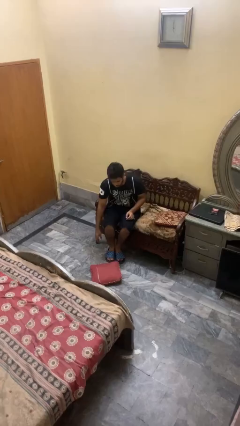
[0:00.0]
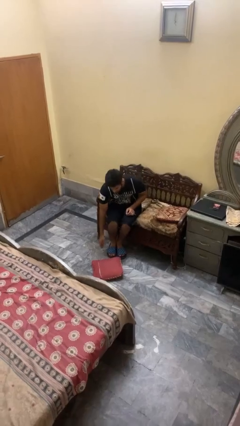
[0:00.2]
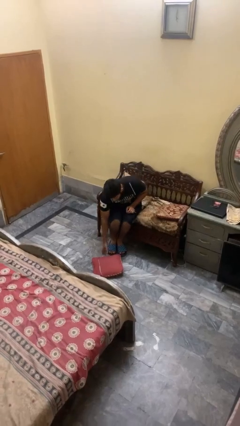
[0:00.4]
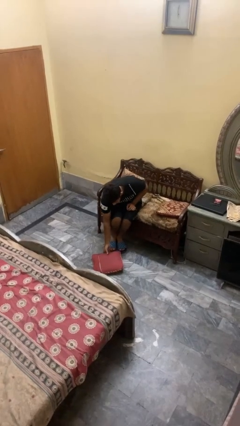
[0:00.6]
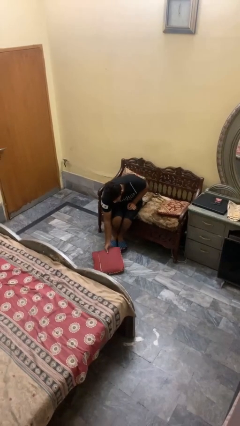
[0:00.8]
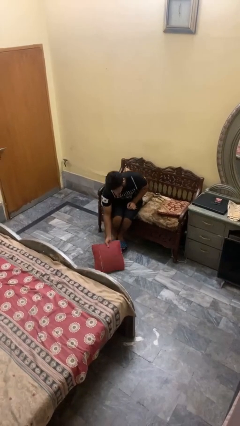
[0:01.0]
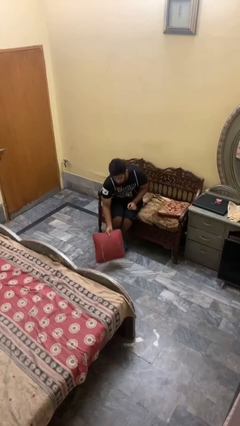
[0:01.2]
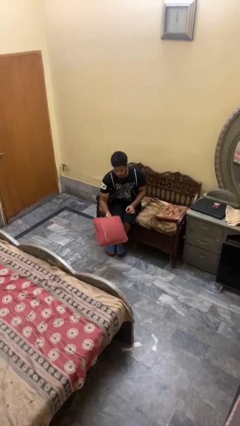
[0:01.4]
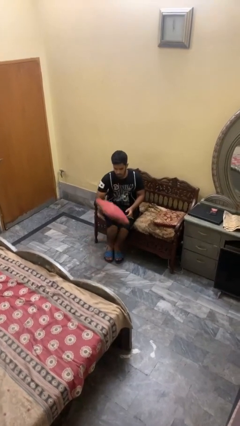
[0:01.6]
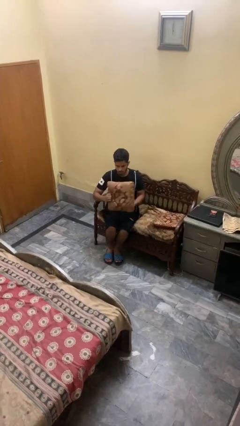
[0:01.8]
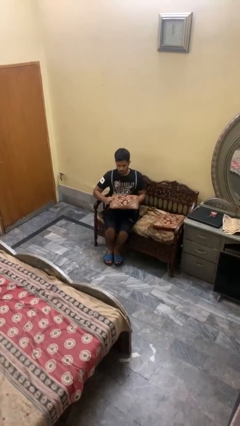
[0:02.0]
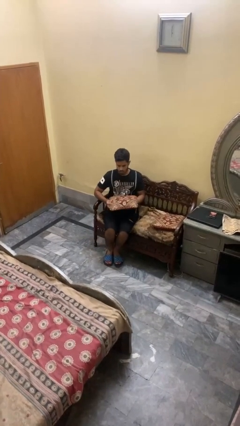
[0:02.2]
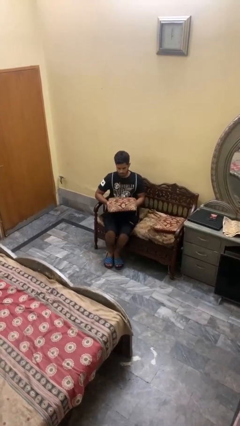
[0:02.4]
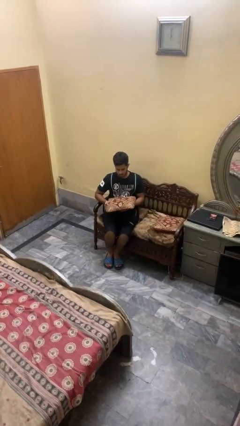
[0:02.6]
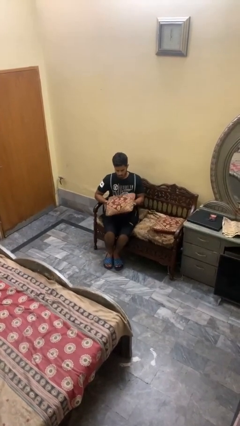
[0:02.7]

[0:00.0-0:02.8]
person picks up object from floor

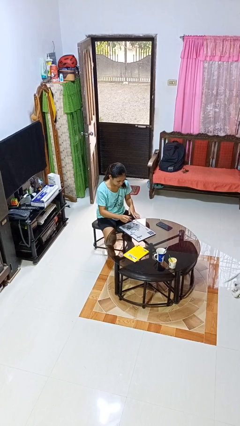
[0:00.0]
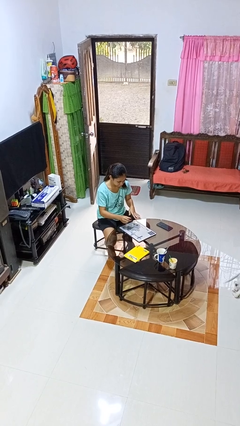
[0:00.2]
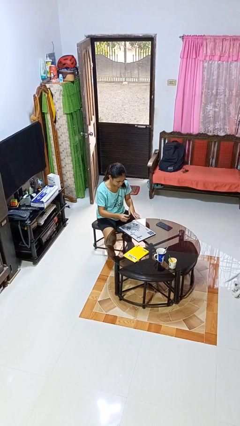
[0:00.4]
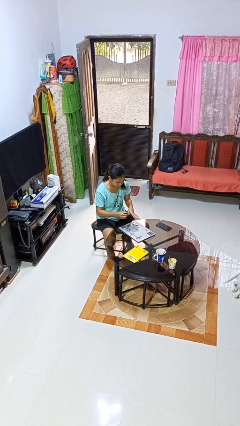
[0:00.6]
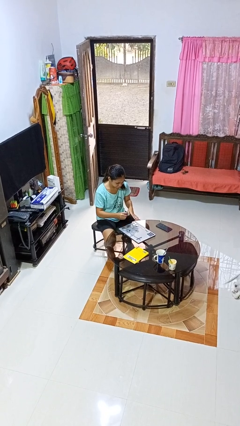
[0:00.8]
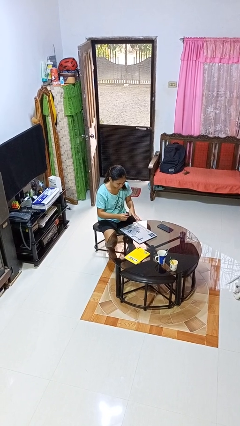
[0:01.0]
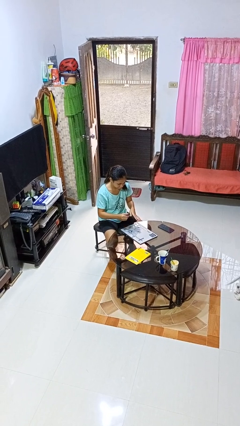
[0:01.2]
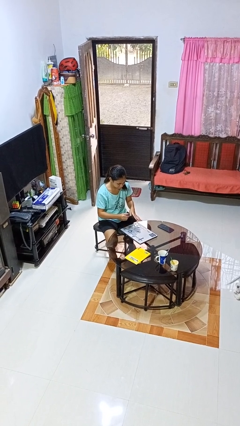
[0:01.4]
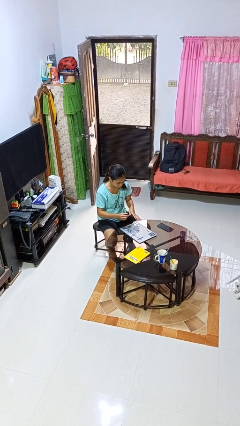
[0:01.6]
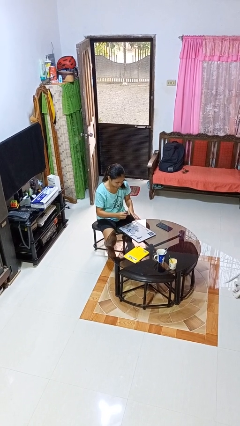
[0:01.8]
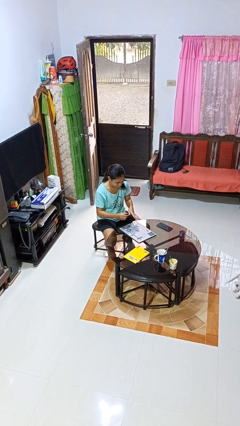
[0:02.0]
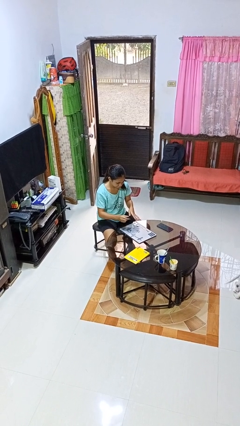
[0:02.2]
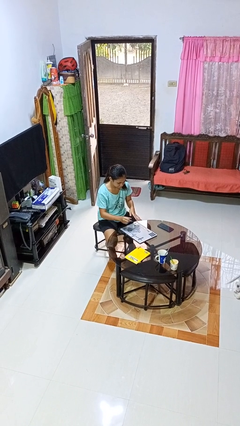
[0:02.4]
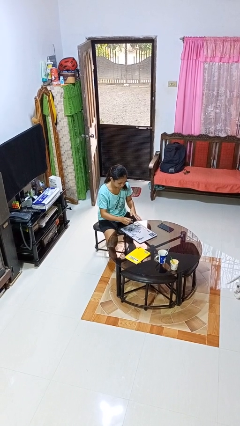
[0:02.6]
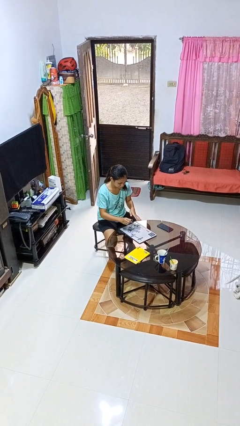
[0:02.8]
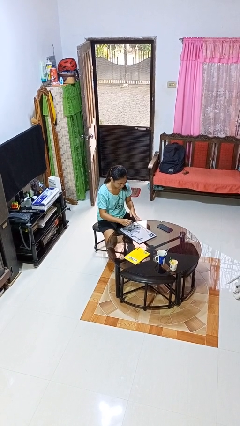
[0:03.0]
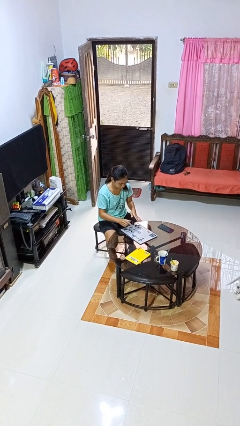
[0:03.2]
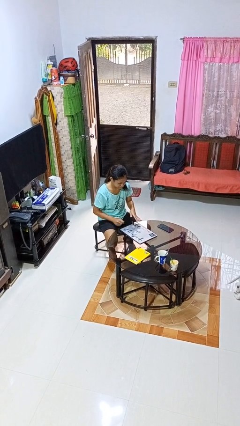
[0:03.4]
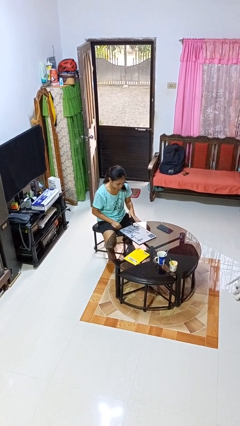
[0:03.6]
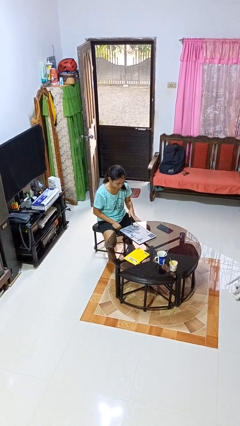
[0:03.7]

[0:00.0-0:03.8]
person paints fingernails

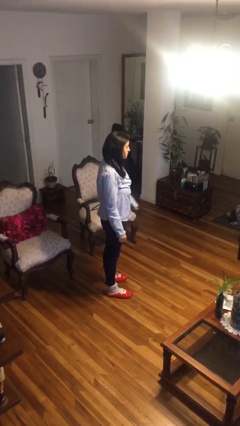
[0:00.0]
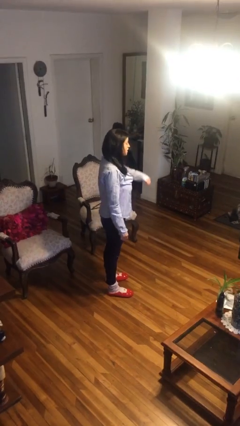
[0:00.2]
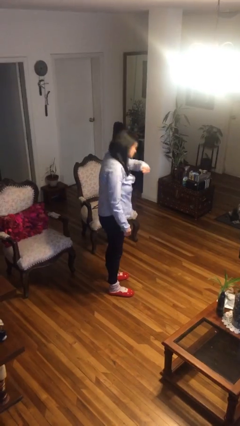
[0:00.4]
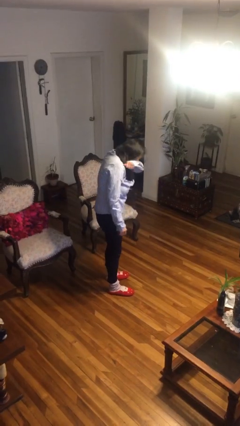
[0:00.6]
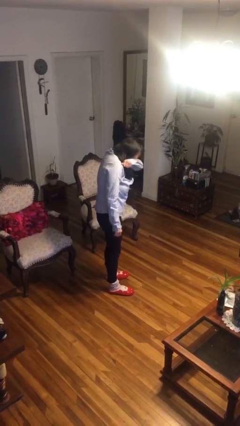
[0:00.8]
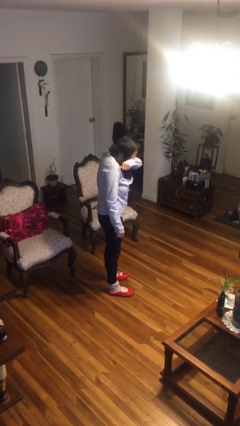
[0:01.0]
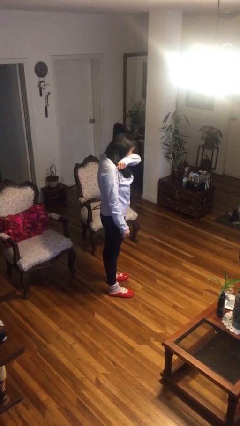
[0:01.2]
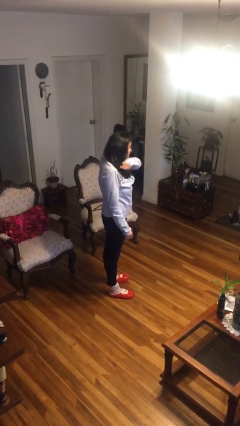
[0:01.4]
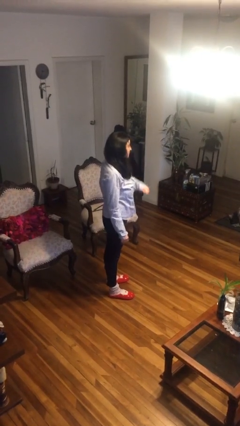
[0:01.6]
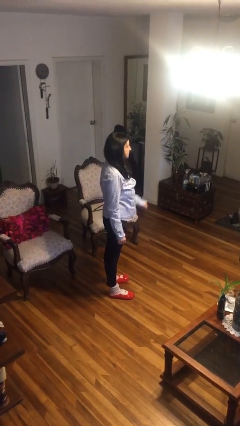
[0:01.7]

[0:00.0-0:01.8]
person sneezes into arm

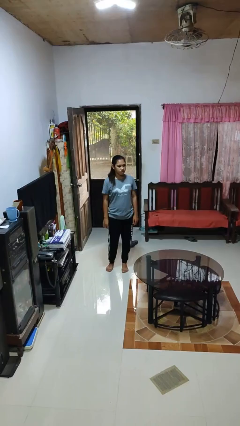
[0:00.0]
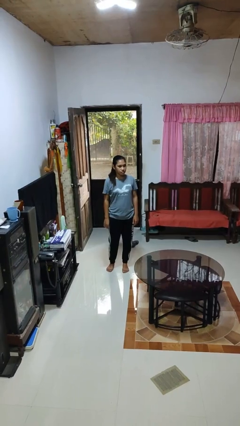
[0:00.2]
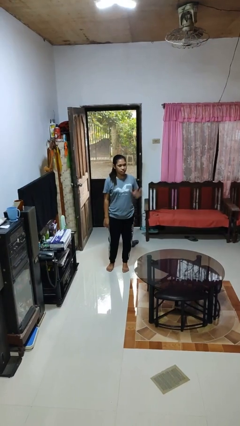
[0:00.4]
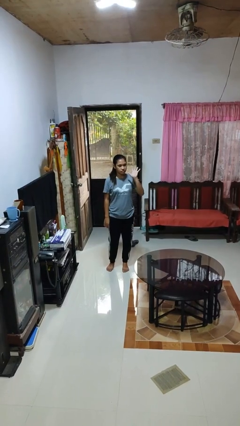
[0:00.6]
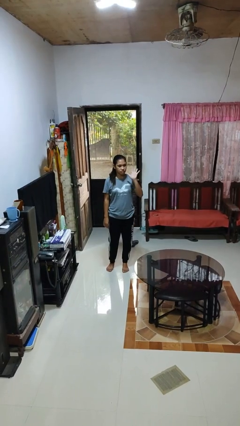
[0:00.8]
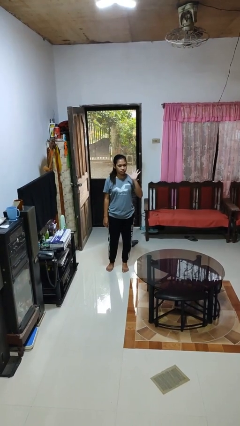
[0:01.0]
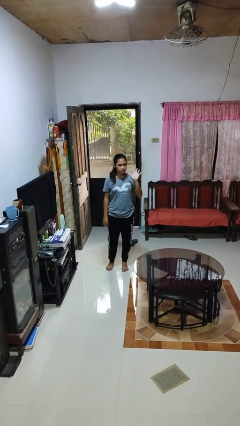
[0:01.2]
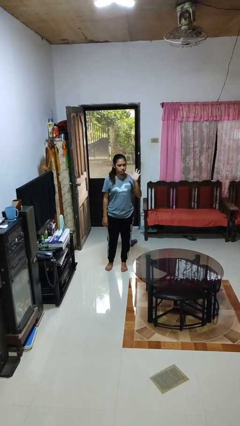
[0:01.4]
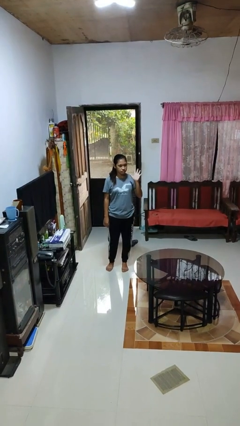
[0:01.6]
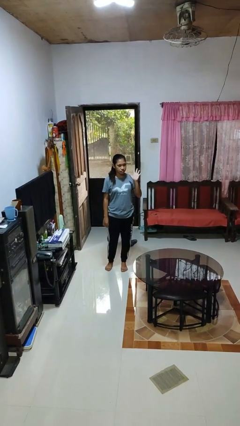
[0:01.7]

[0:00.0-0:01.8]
person gestures number five

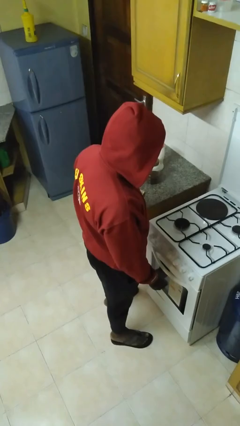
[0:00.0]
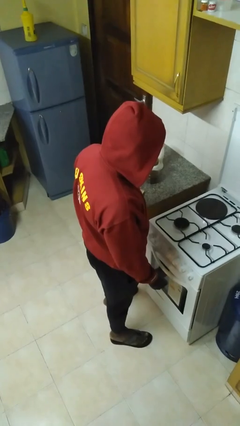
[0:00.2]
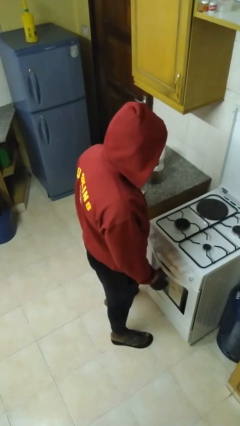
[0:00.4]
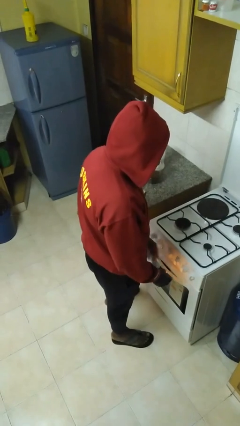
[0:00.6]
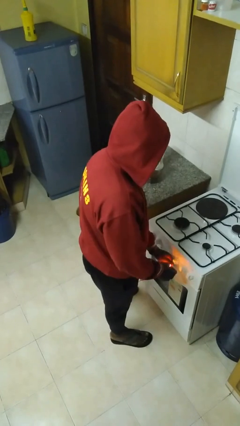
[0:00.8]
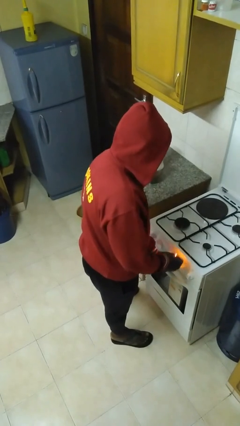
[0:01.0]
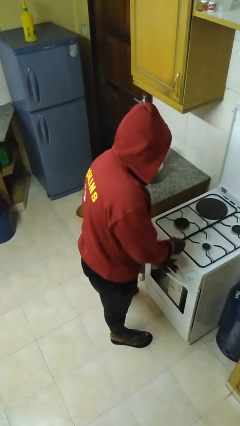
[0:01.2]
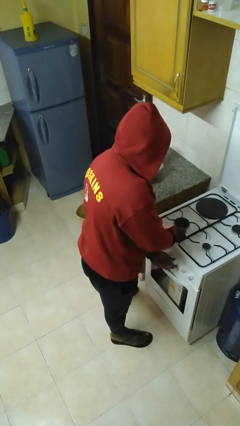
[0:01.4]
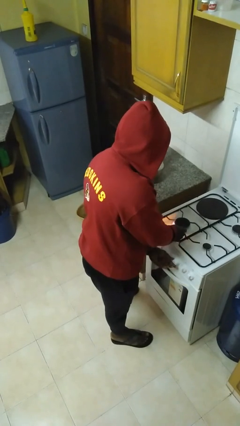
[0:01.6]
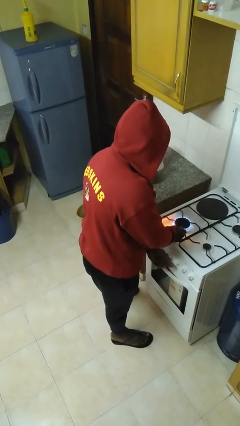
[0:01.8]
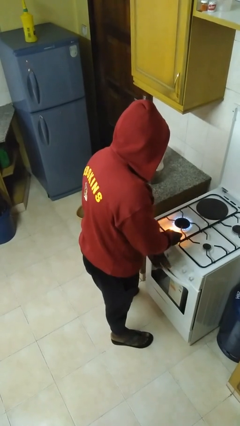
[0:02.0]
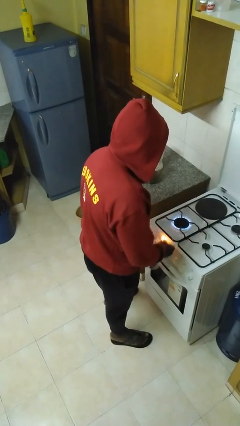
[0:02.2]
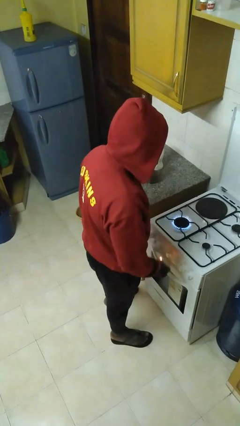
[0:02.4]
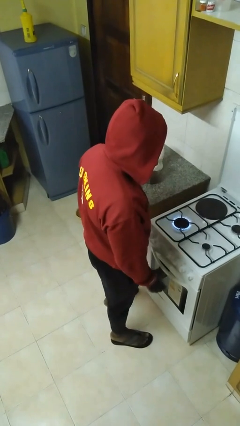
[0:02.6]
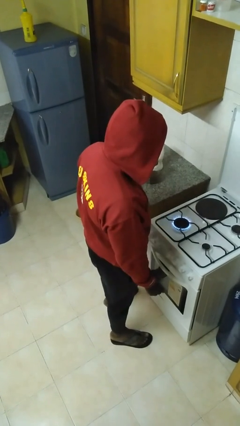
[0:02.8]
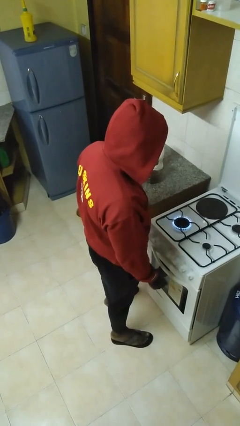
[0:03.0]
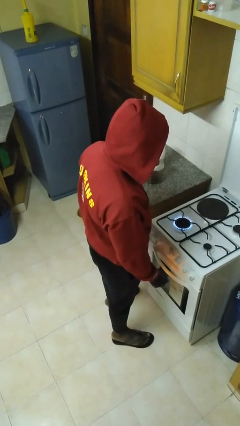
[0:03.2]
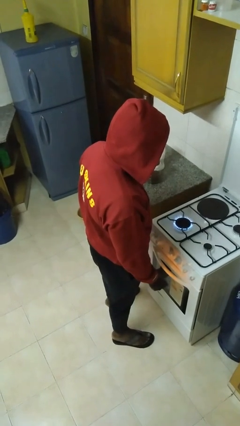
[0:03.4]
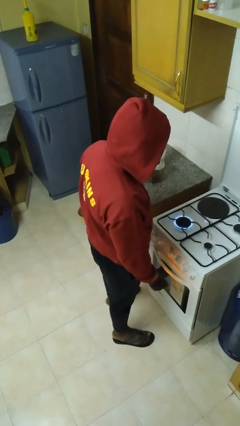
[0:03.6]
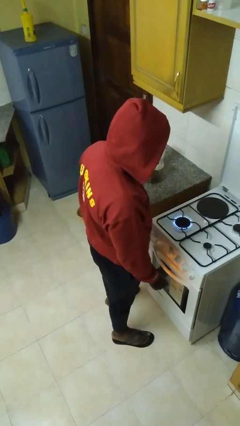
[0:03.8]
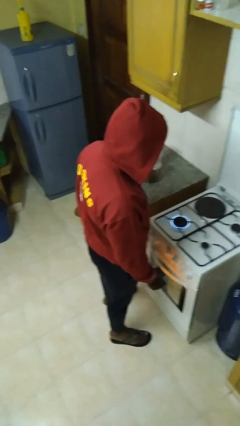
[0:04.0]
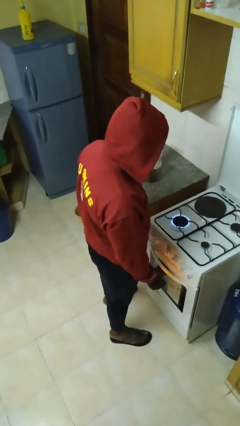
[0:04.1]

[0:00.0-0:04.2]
person turns on stovetop

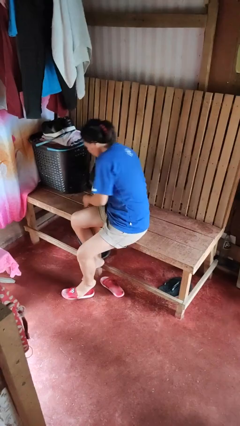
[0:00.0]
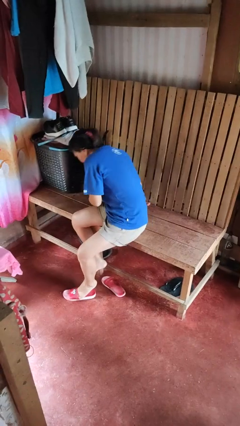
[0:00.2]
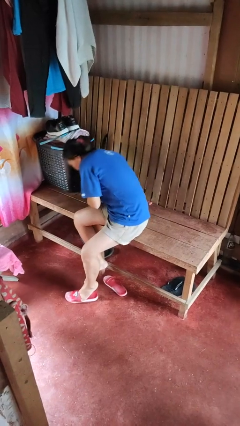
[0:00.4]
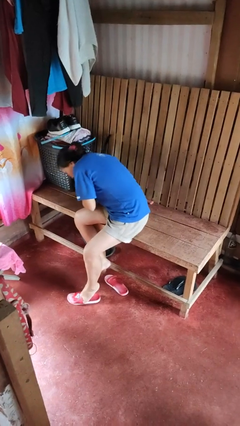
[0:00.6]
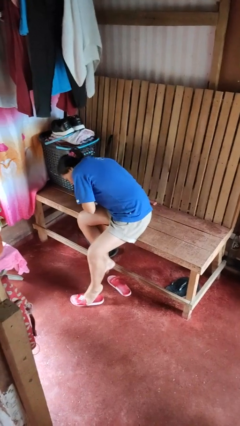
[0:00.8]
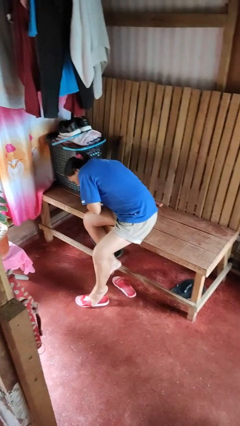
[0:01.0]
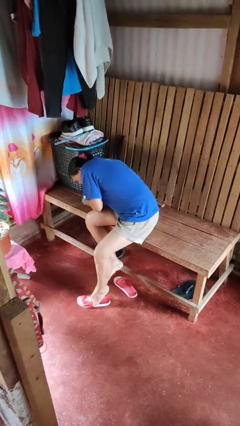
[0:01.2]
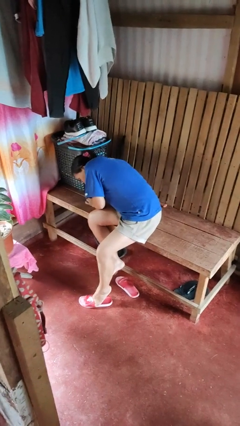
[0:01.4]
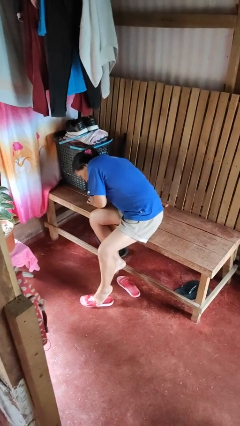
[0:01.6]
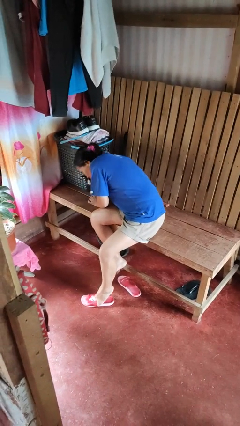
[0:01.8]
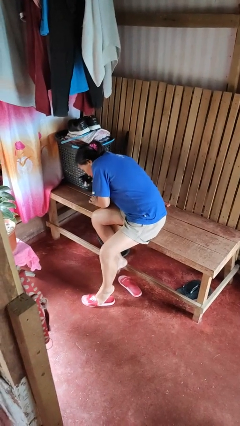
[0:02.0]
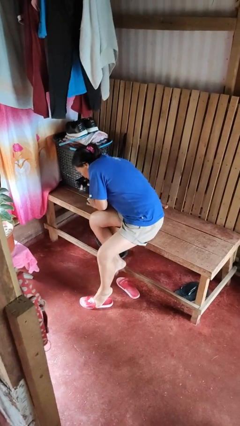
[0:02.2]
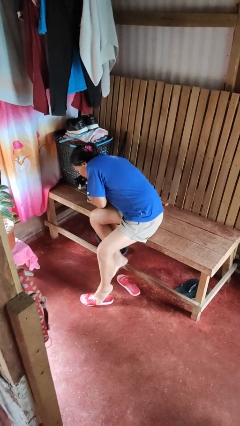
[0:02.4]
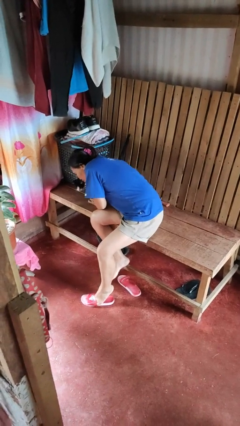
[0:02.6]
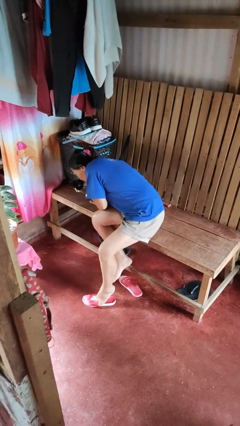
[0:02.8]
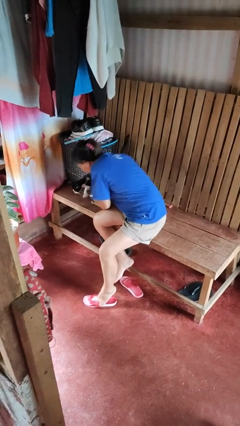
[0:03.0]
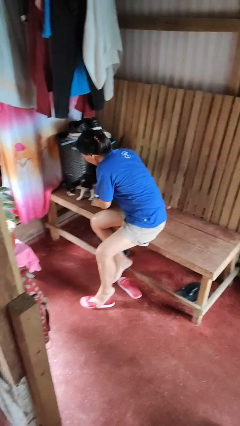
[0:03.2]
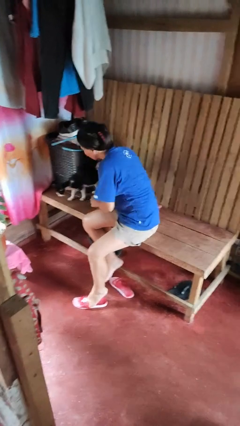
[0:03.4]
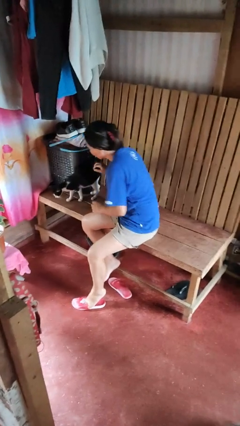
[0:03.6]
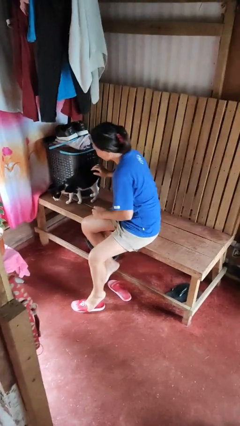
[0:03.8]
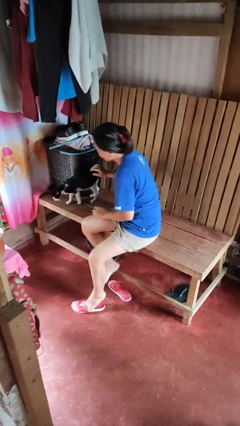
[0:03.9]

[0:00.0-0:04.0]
person hugs cat
